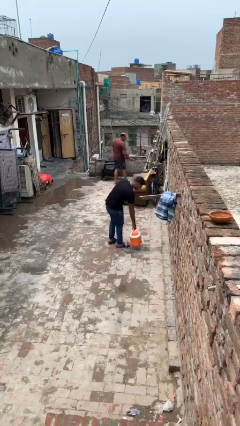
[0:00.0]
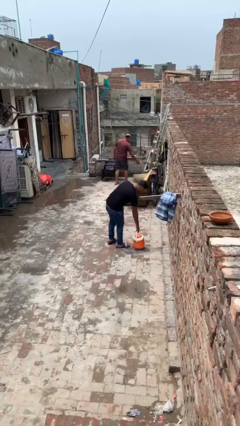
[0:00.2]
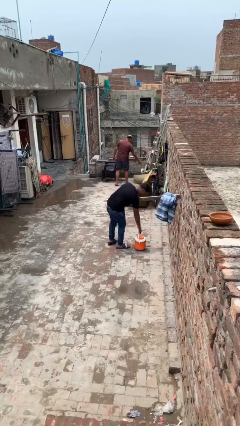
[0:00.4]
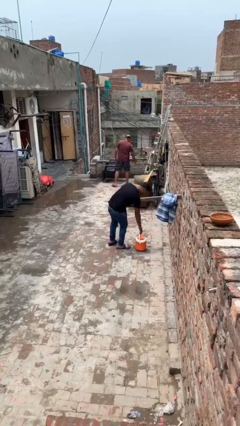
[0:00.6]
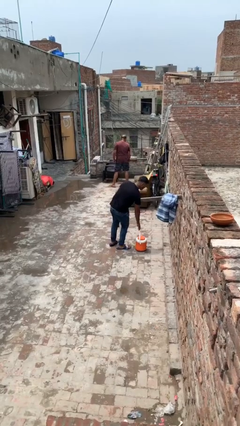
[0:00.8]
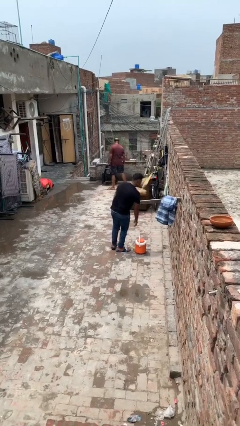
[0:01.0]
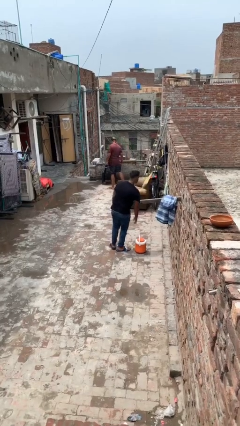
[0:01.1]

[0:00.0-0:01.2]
person puts down object on floor

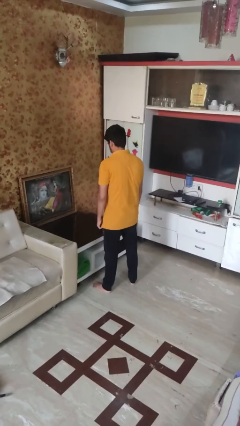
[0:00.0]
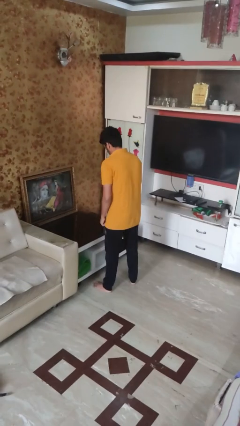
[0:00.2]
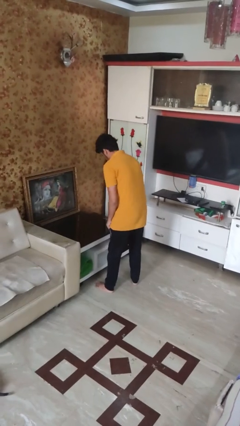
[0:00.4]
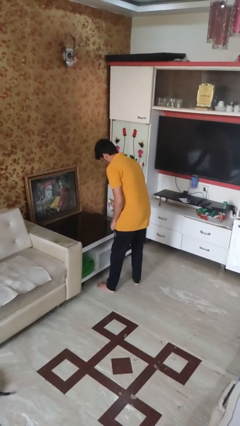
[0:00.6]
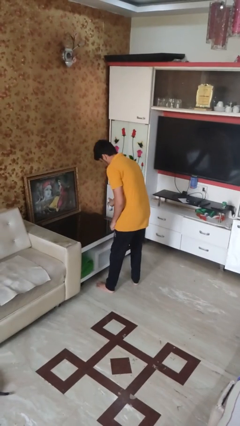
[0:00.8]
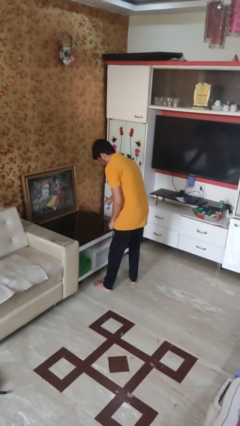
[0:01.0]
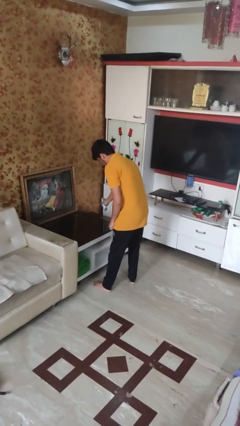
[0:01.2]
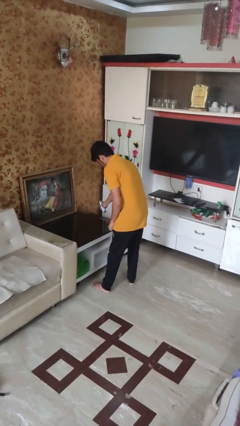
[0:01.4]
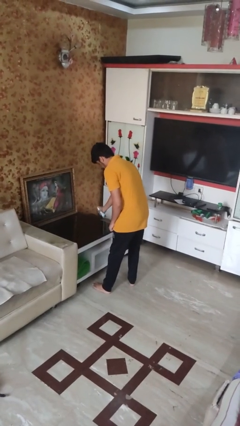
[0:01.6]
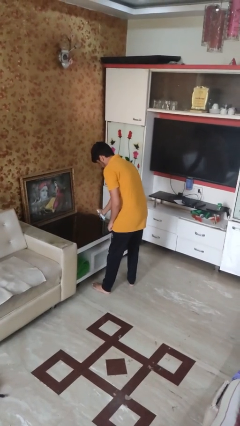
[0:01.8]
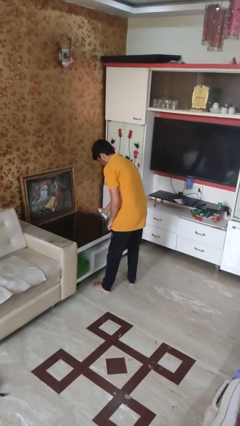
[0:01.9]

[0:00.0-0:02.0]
person sprays from bottle

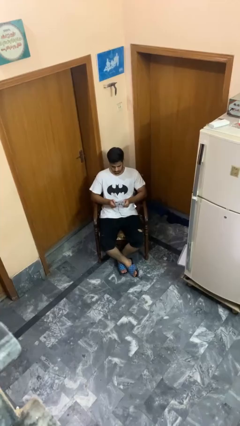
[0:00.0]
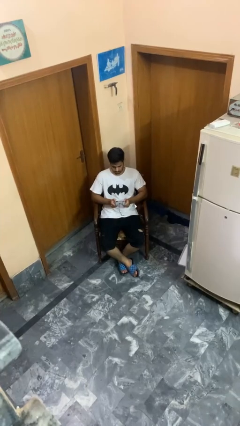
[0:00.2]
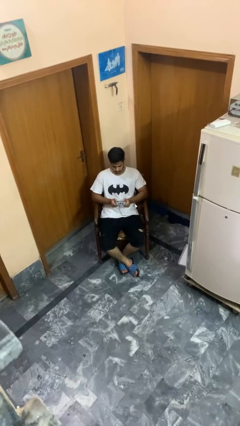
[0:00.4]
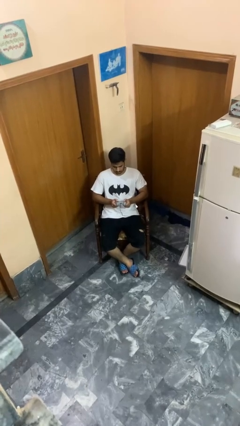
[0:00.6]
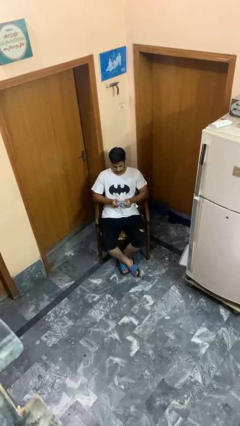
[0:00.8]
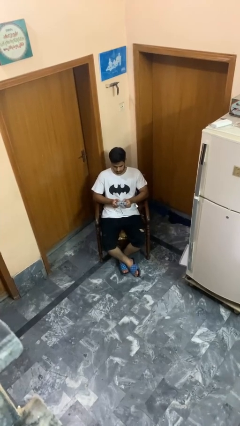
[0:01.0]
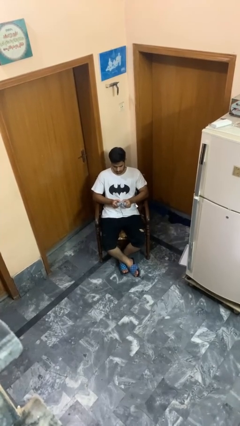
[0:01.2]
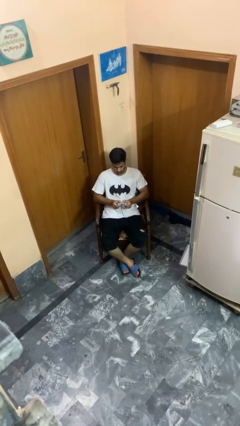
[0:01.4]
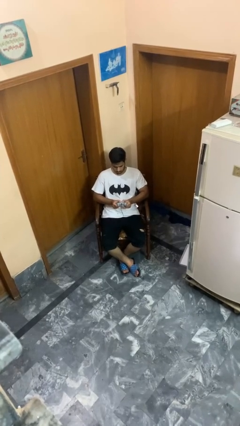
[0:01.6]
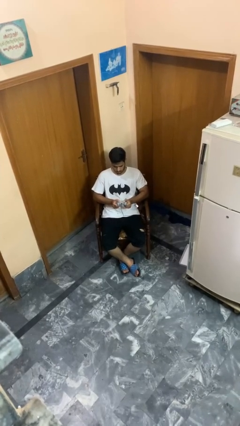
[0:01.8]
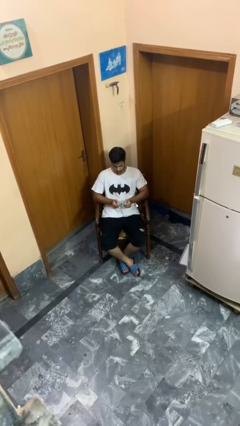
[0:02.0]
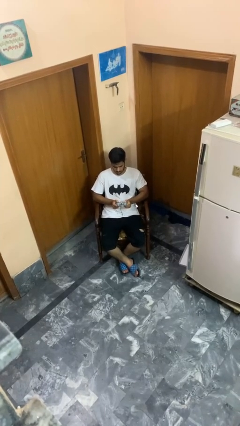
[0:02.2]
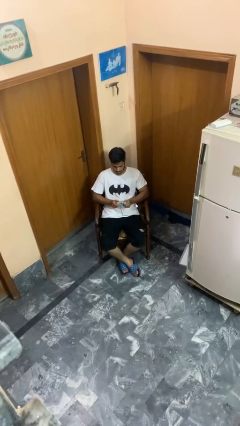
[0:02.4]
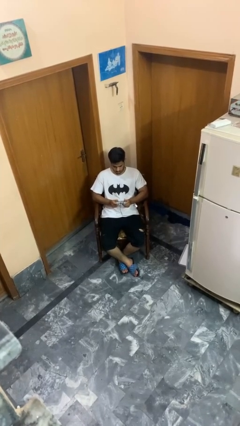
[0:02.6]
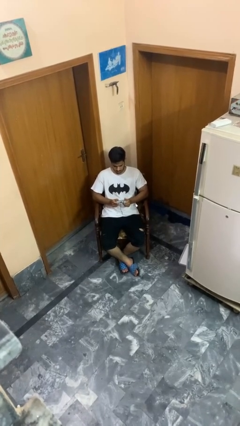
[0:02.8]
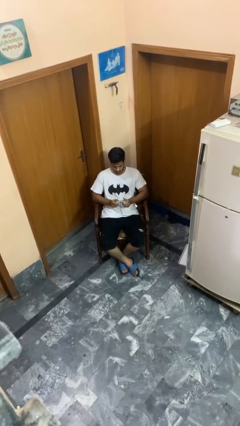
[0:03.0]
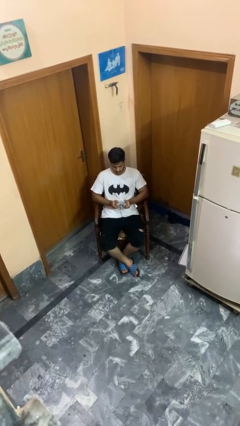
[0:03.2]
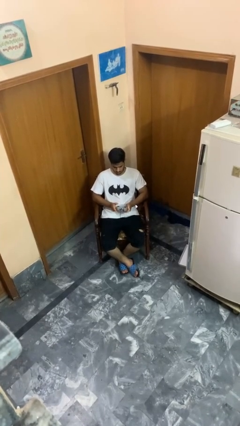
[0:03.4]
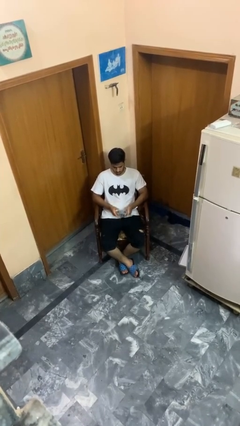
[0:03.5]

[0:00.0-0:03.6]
person interacts with handheld game

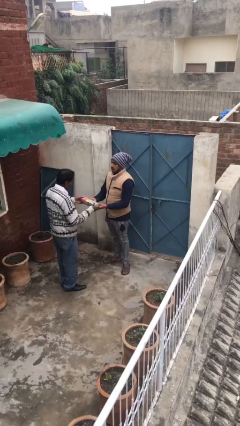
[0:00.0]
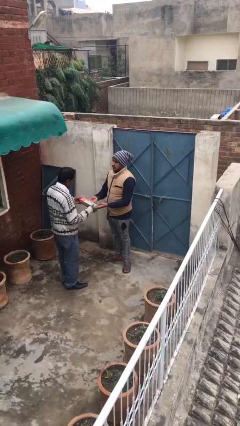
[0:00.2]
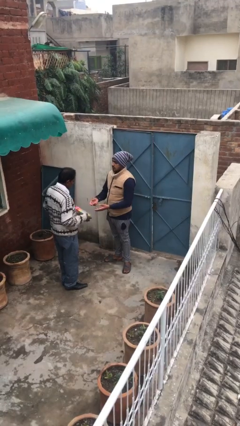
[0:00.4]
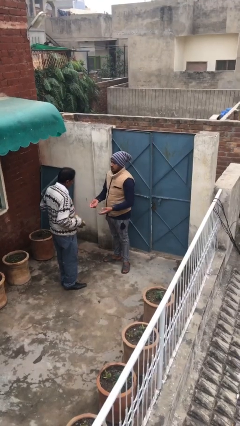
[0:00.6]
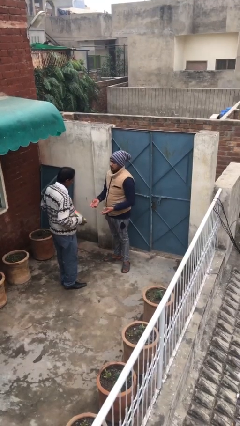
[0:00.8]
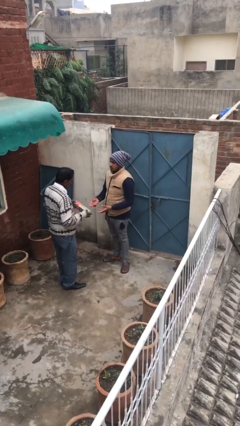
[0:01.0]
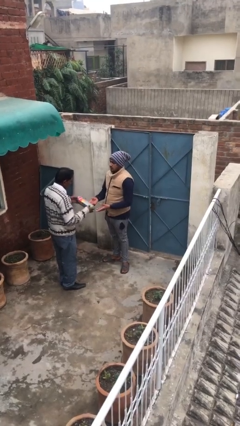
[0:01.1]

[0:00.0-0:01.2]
person transfers object to person

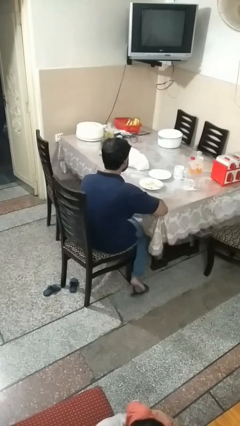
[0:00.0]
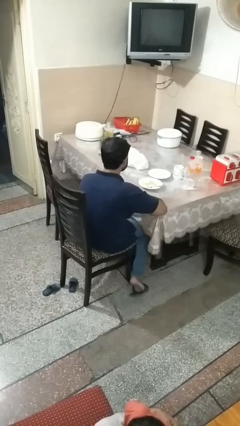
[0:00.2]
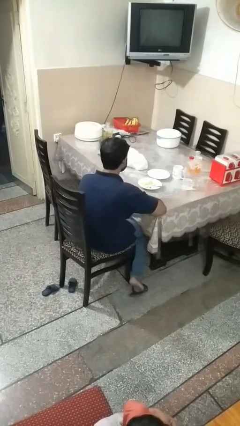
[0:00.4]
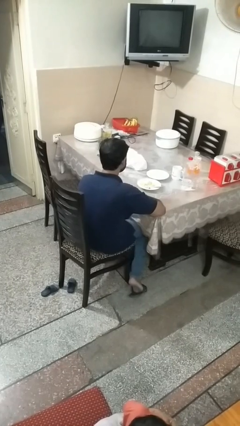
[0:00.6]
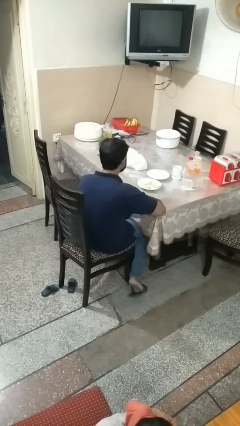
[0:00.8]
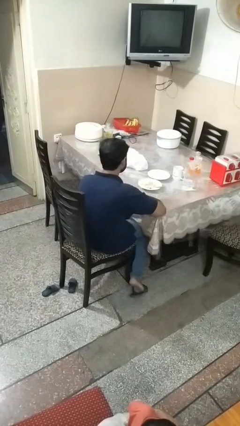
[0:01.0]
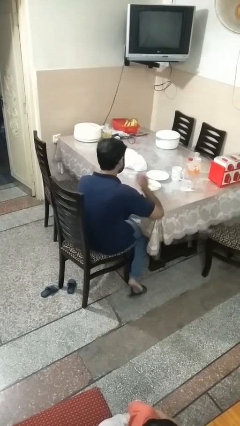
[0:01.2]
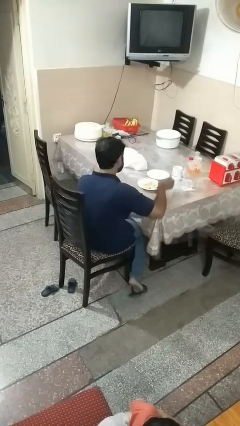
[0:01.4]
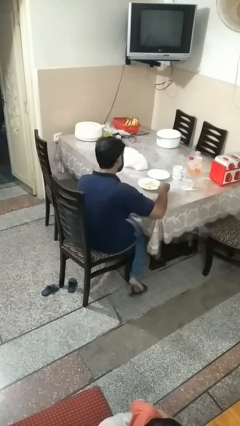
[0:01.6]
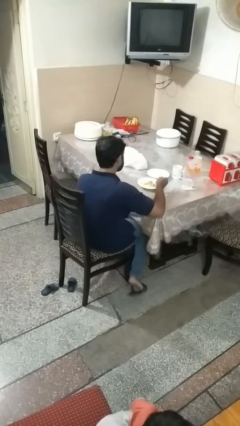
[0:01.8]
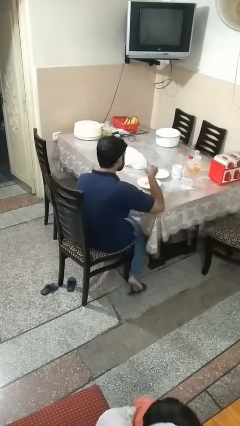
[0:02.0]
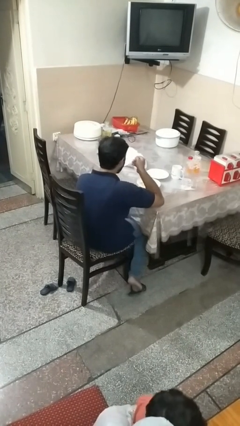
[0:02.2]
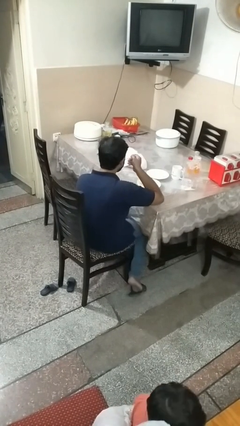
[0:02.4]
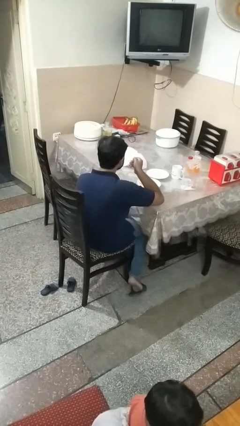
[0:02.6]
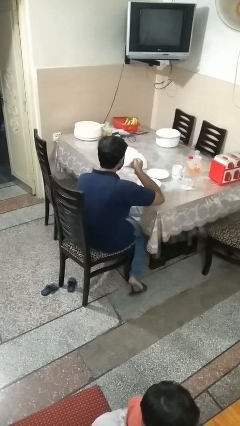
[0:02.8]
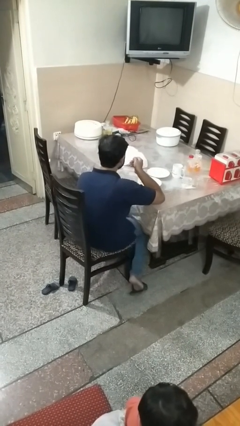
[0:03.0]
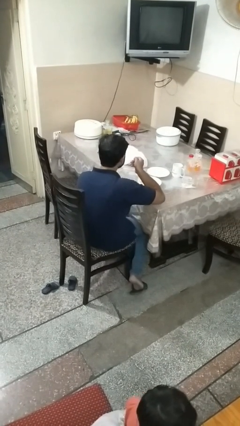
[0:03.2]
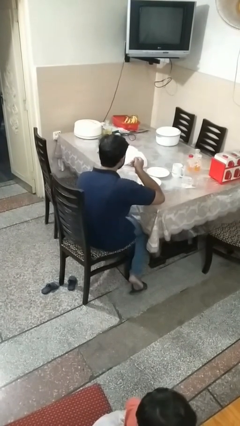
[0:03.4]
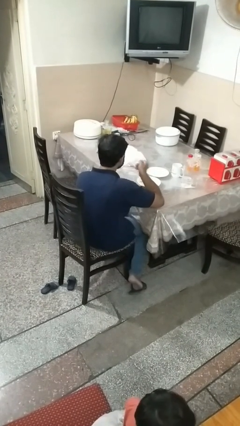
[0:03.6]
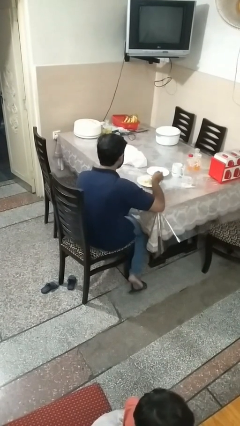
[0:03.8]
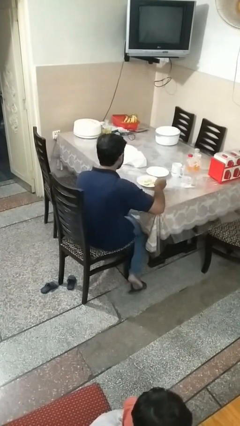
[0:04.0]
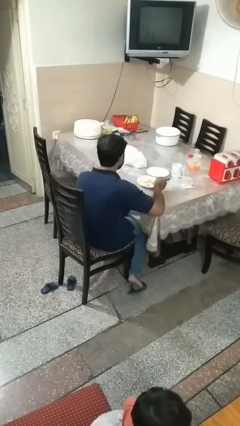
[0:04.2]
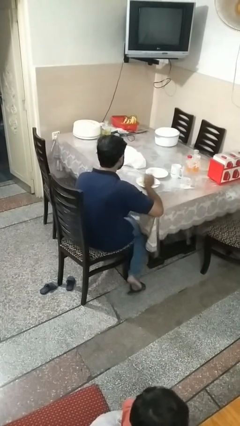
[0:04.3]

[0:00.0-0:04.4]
person eats with utensil

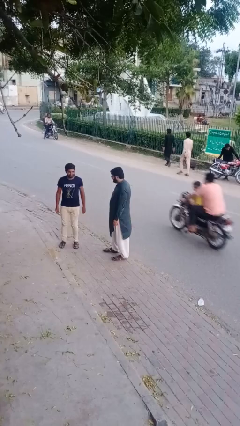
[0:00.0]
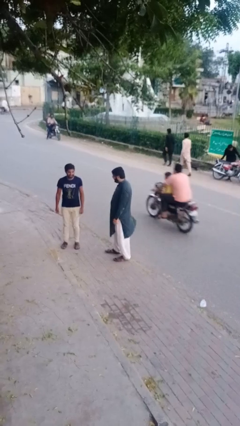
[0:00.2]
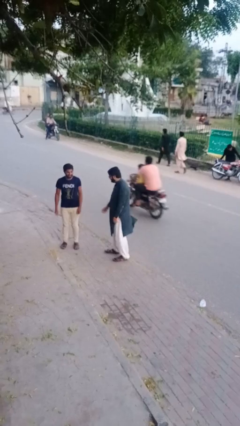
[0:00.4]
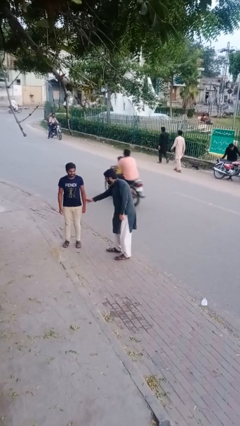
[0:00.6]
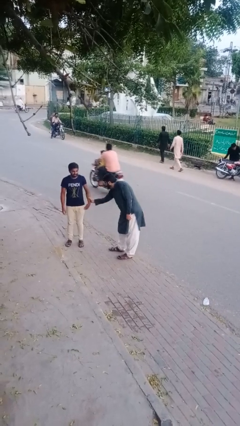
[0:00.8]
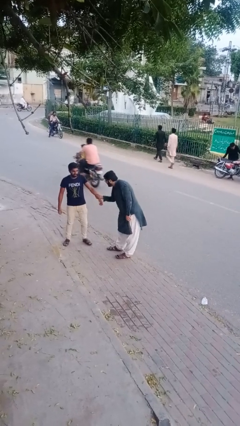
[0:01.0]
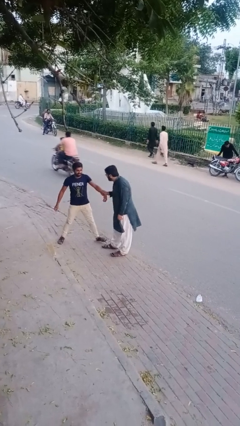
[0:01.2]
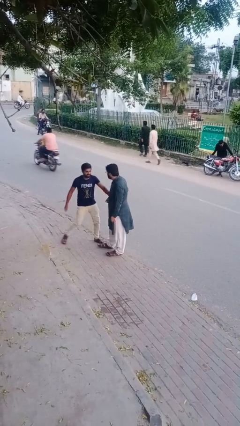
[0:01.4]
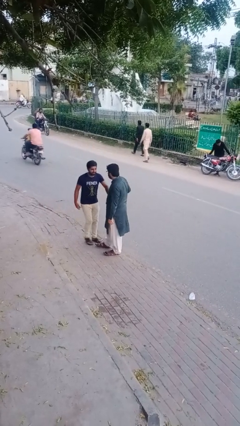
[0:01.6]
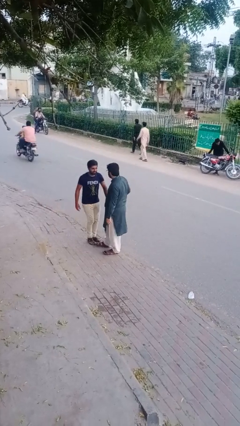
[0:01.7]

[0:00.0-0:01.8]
person grabs person by forearm

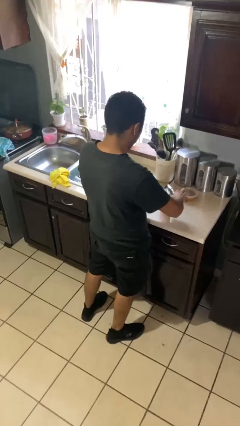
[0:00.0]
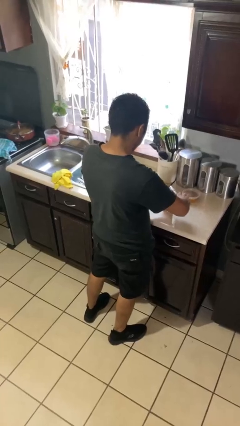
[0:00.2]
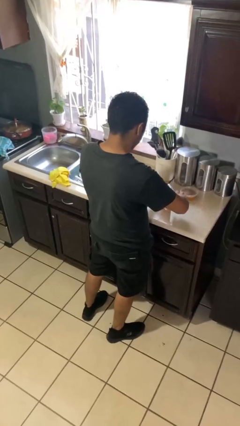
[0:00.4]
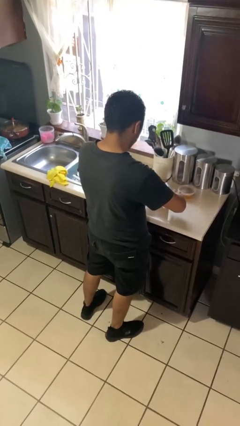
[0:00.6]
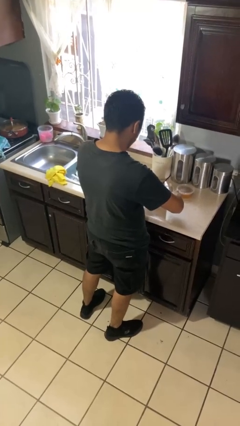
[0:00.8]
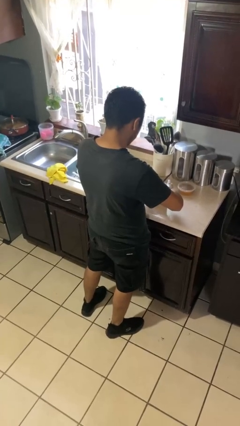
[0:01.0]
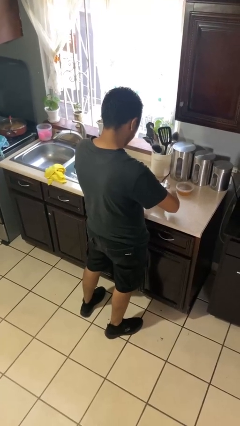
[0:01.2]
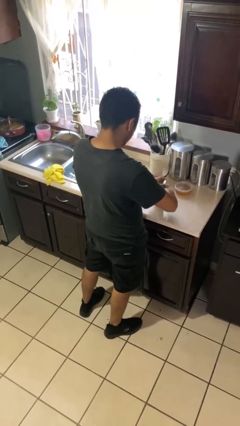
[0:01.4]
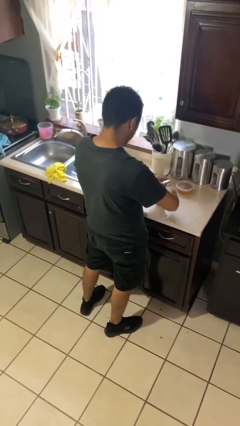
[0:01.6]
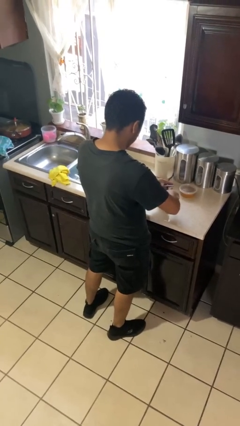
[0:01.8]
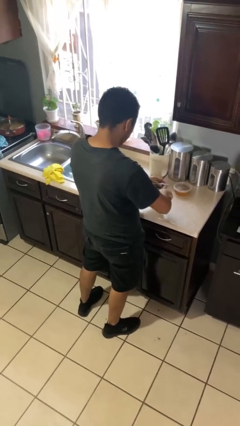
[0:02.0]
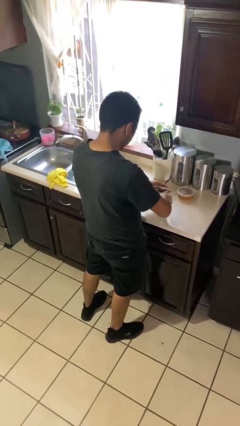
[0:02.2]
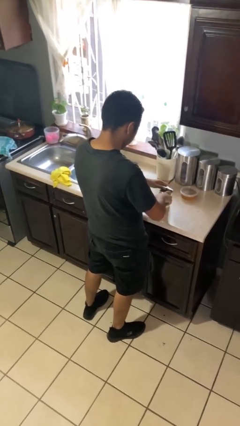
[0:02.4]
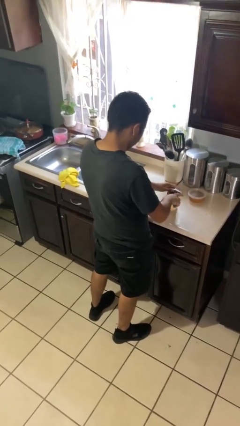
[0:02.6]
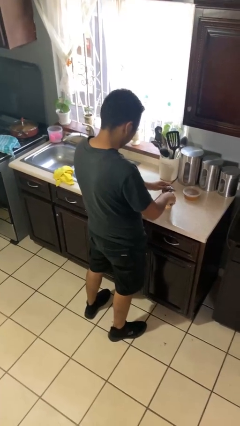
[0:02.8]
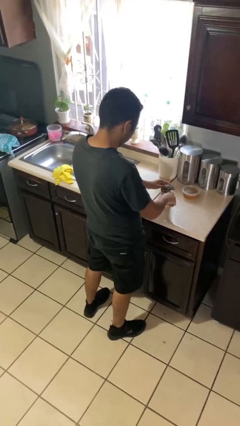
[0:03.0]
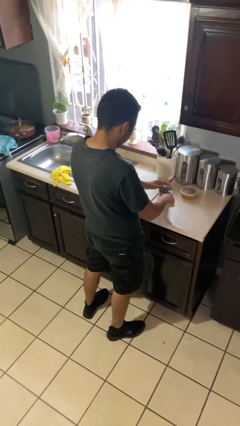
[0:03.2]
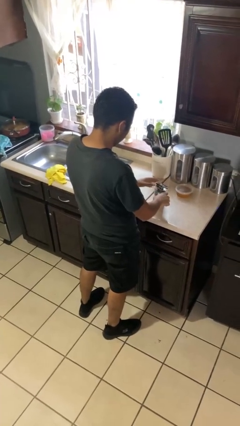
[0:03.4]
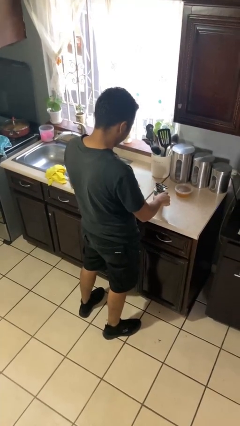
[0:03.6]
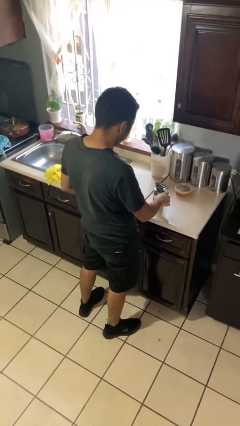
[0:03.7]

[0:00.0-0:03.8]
person opens can with can opener
